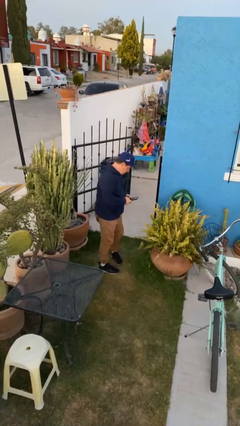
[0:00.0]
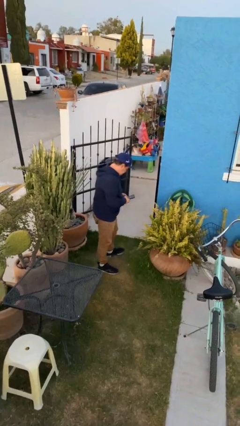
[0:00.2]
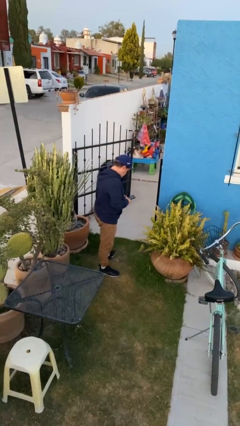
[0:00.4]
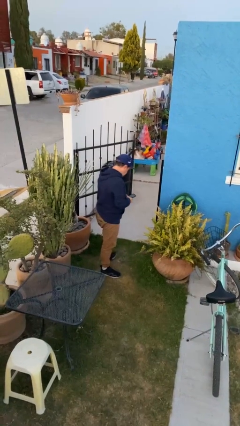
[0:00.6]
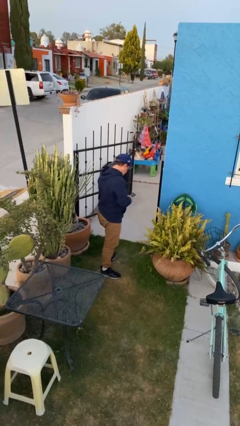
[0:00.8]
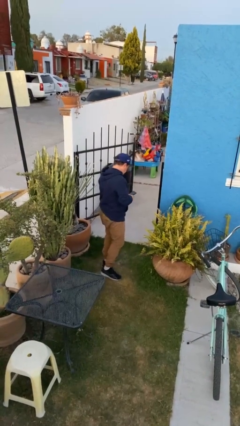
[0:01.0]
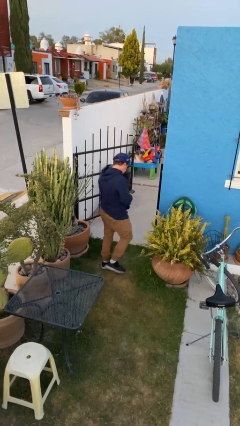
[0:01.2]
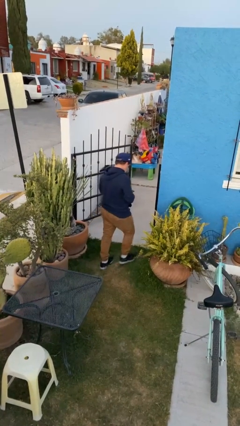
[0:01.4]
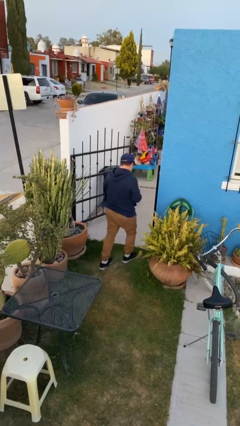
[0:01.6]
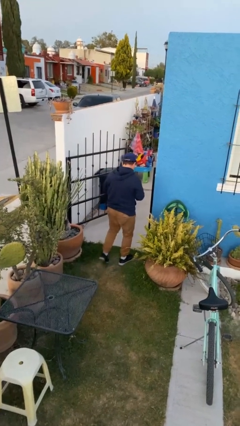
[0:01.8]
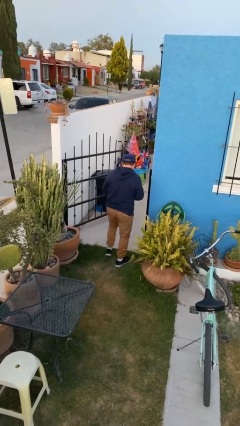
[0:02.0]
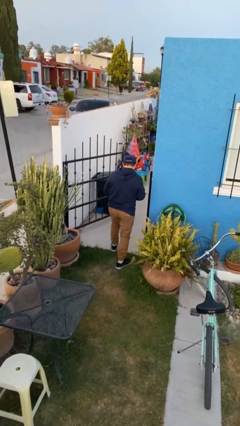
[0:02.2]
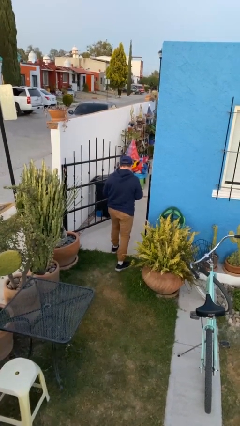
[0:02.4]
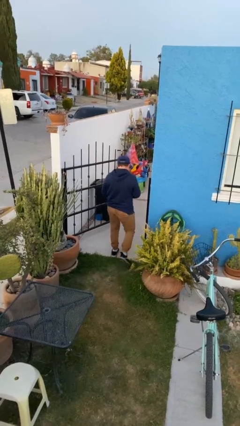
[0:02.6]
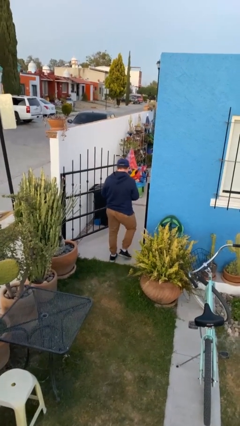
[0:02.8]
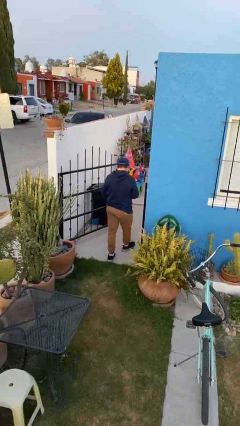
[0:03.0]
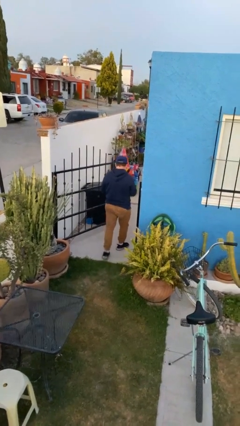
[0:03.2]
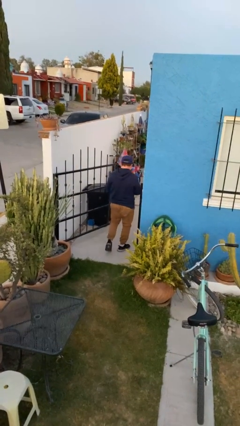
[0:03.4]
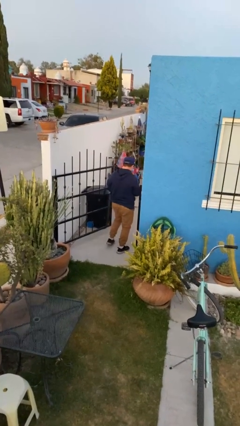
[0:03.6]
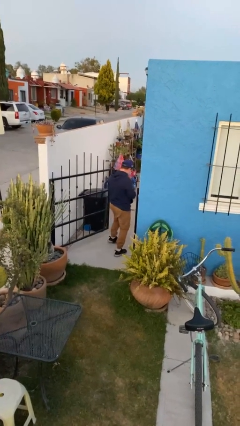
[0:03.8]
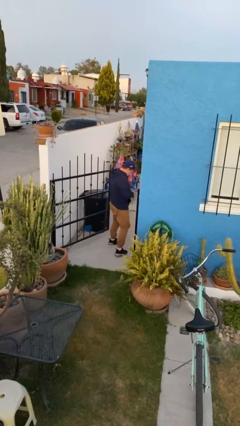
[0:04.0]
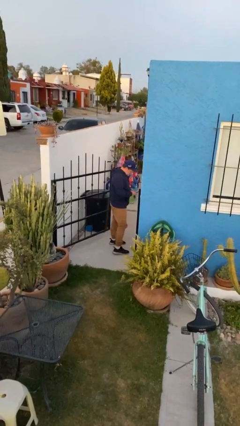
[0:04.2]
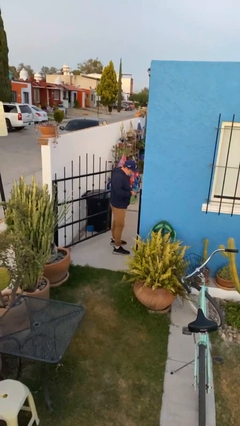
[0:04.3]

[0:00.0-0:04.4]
person exits scene through structure

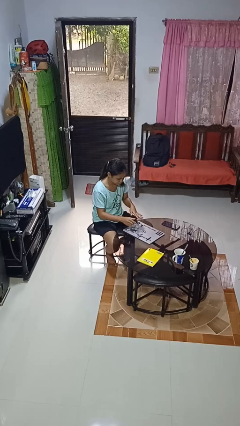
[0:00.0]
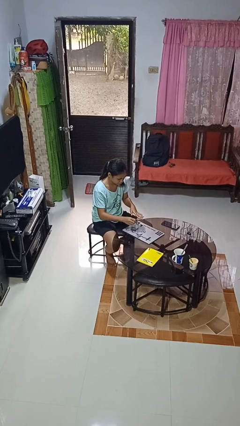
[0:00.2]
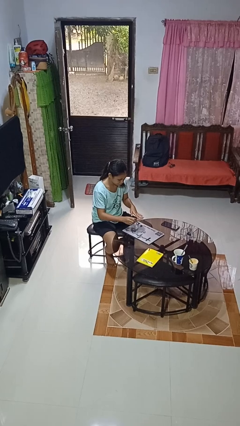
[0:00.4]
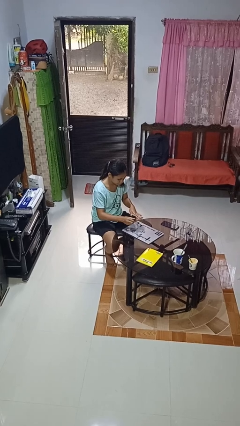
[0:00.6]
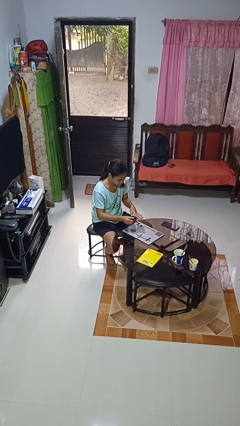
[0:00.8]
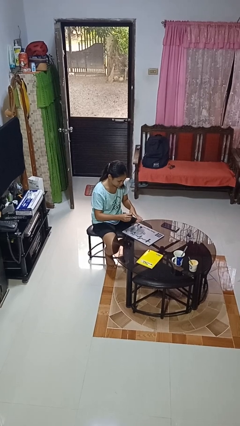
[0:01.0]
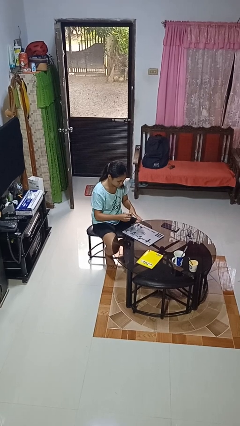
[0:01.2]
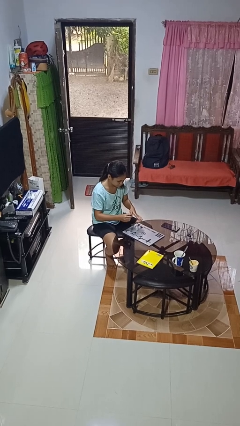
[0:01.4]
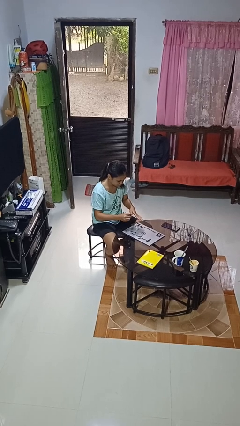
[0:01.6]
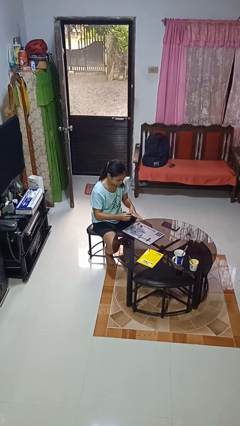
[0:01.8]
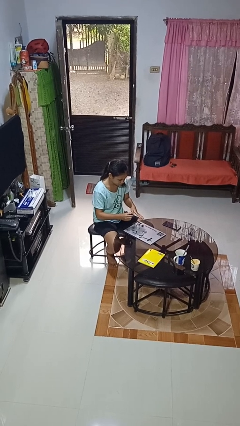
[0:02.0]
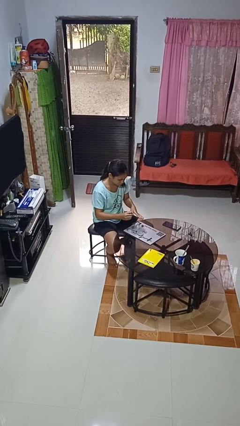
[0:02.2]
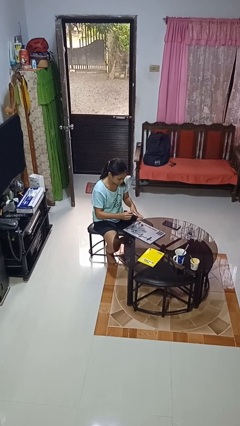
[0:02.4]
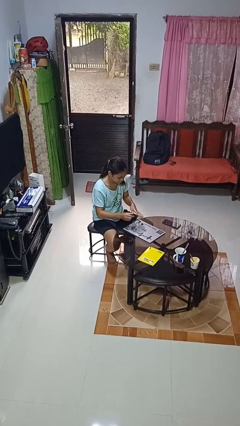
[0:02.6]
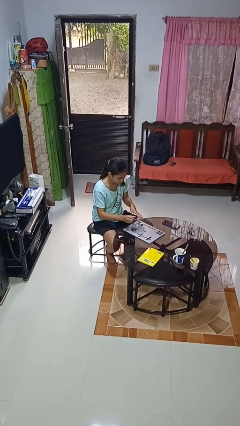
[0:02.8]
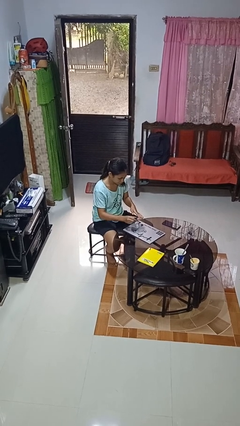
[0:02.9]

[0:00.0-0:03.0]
person paints fingernails

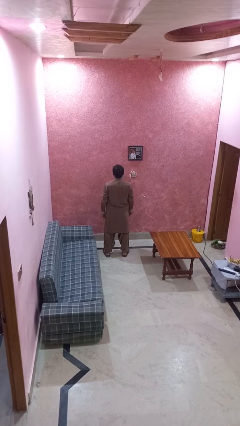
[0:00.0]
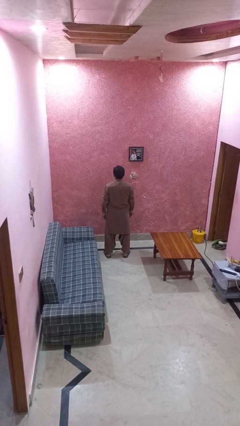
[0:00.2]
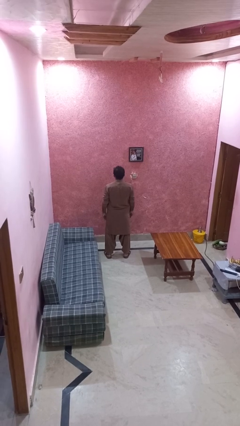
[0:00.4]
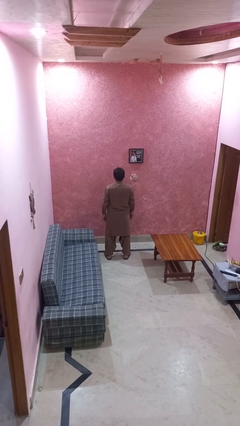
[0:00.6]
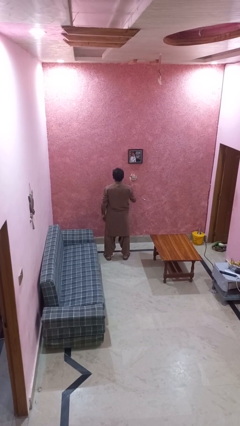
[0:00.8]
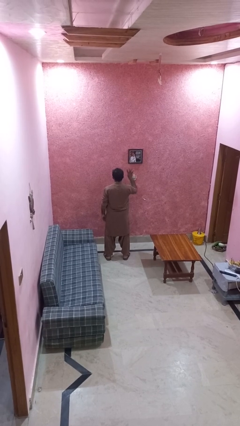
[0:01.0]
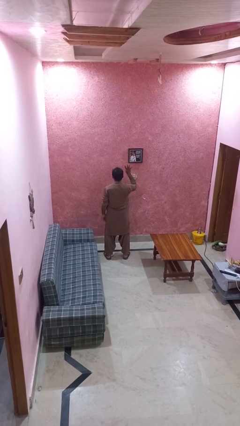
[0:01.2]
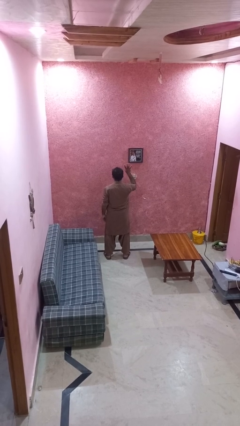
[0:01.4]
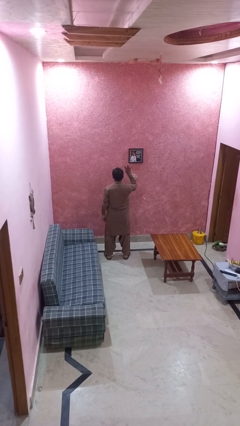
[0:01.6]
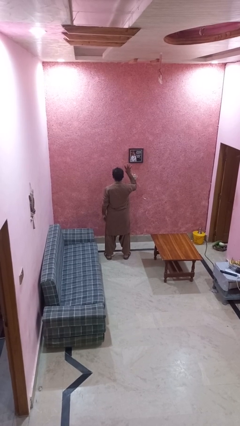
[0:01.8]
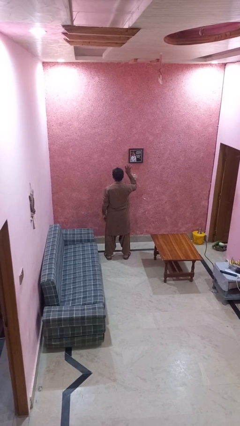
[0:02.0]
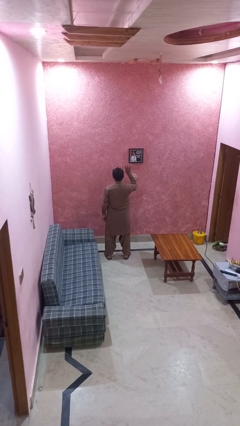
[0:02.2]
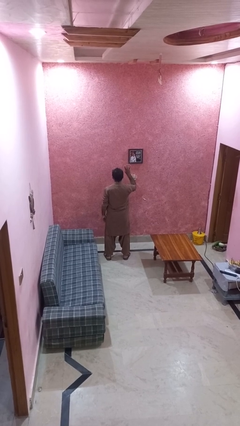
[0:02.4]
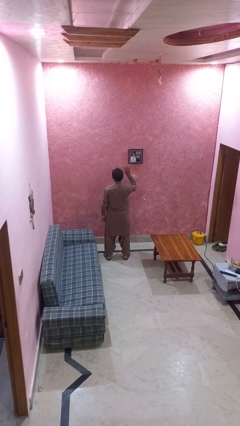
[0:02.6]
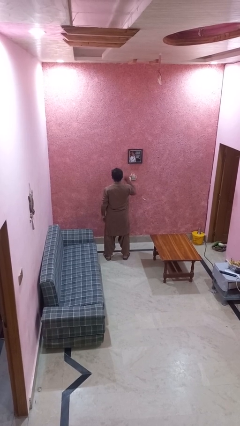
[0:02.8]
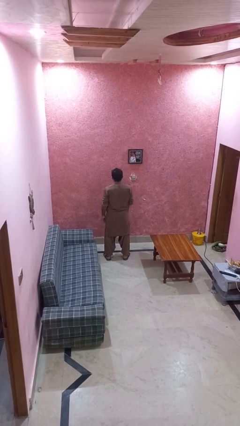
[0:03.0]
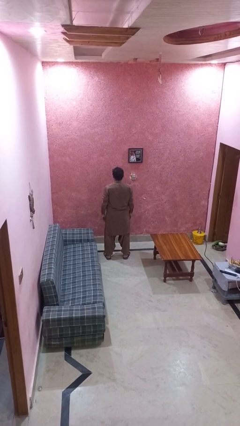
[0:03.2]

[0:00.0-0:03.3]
person gestures number four

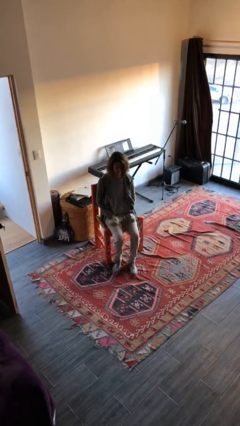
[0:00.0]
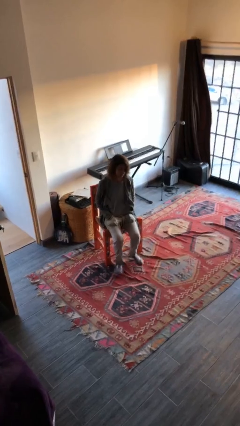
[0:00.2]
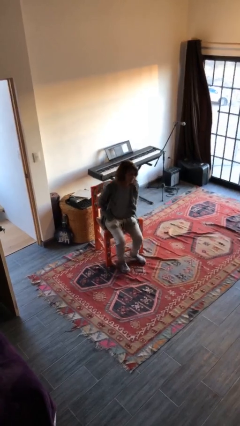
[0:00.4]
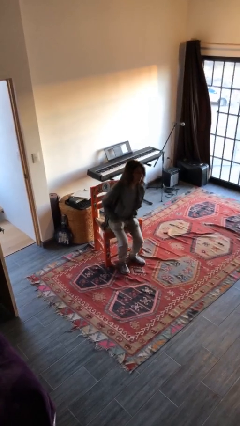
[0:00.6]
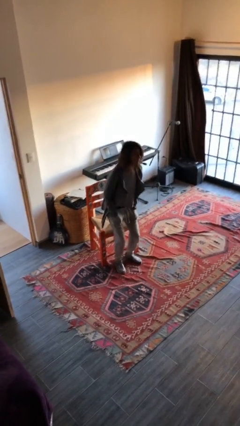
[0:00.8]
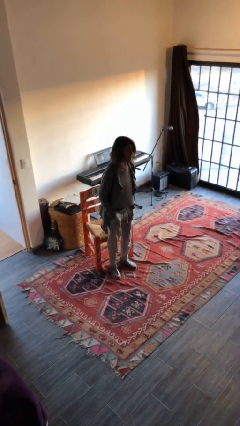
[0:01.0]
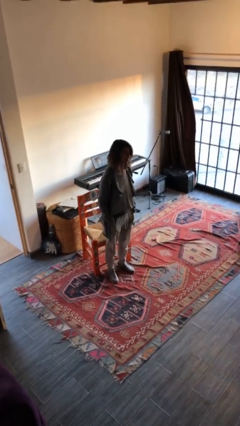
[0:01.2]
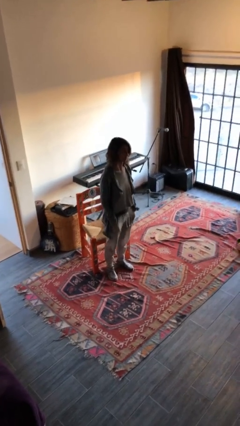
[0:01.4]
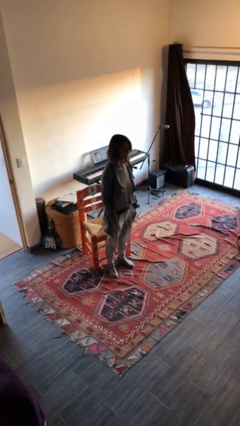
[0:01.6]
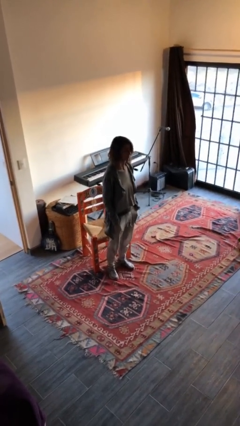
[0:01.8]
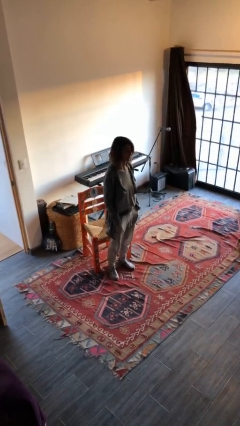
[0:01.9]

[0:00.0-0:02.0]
person stands up

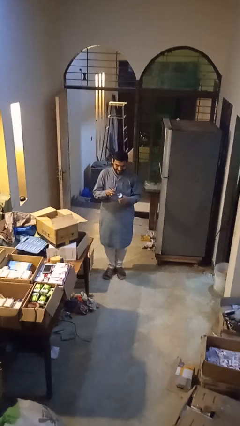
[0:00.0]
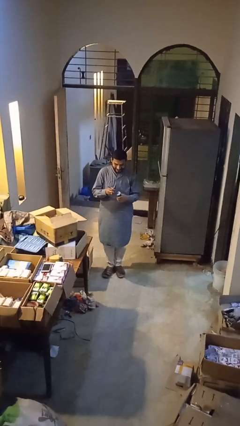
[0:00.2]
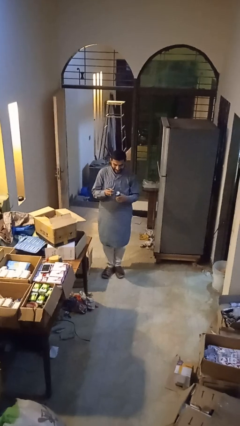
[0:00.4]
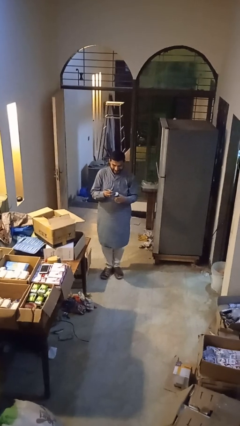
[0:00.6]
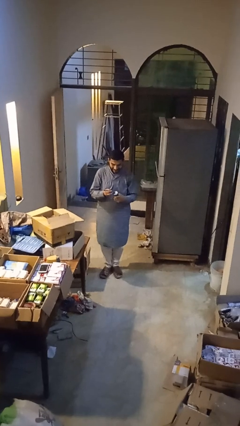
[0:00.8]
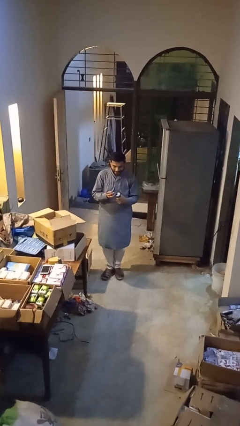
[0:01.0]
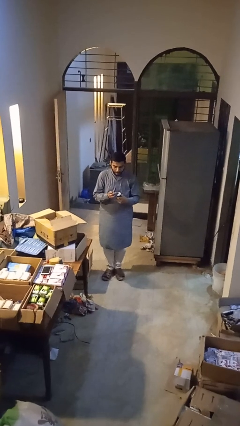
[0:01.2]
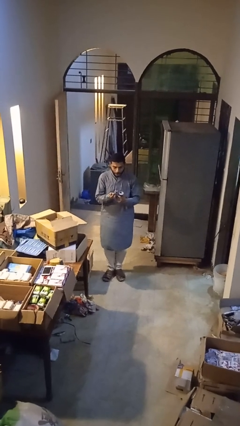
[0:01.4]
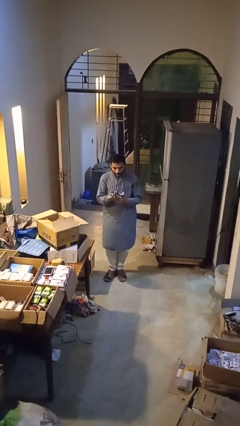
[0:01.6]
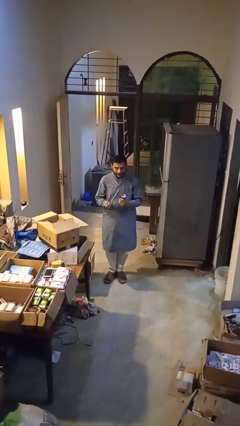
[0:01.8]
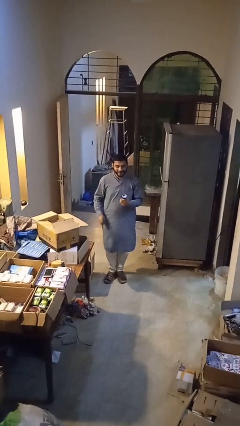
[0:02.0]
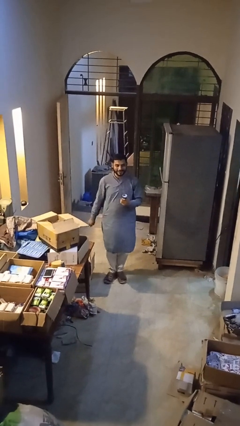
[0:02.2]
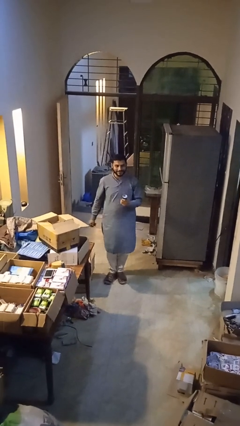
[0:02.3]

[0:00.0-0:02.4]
person opens can with can opener

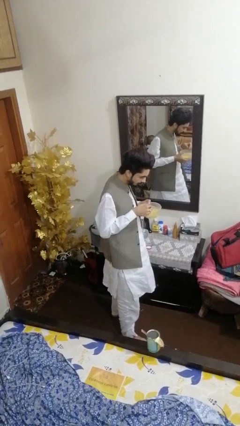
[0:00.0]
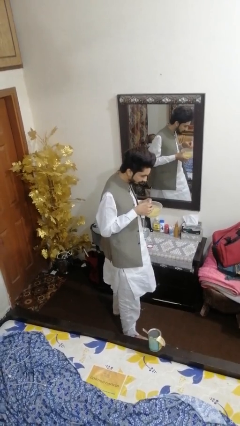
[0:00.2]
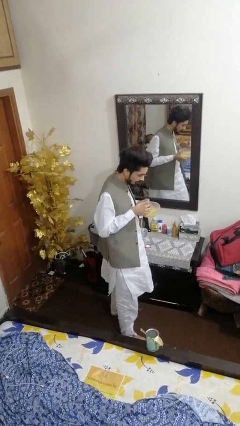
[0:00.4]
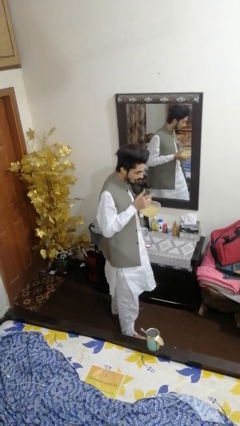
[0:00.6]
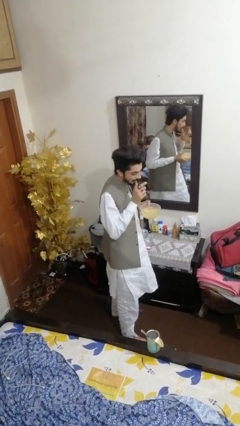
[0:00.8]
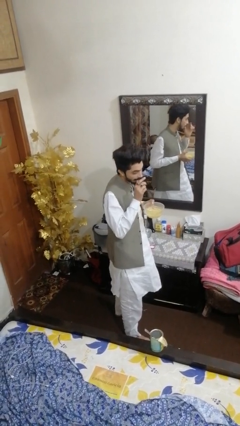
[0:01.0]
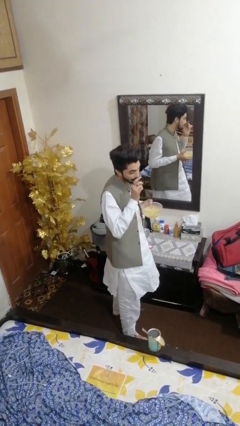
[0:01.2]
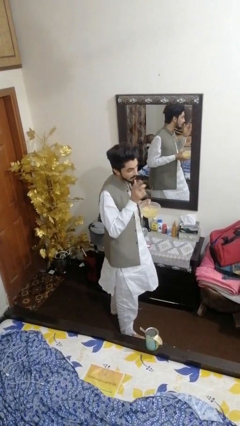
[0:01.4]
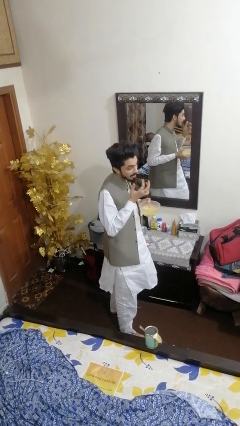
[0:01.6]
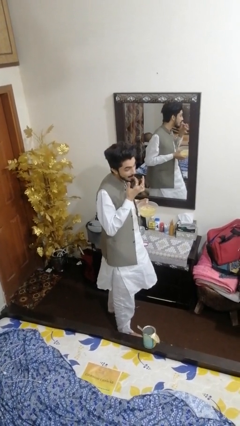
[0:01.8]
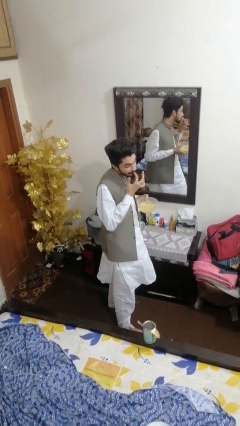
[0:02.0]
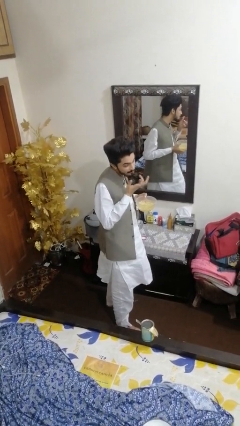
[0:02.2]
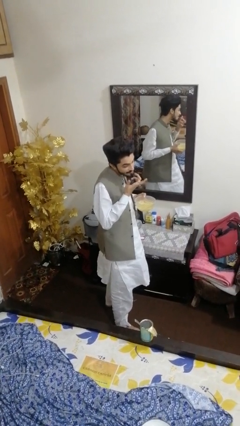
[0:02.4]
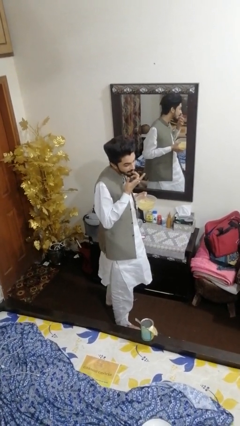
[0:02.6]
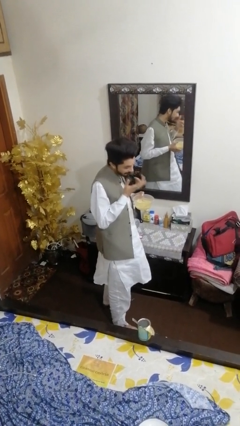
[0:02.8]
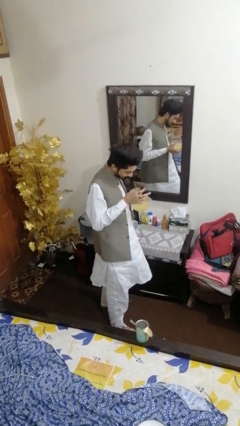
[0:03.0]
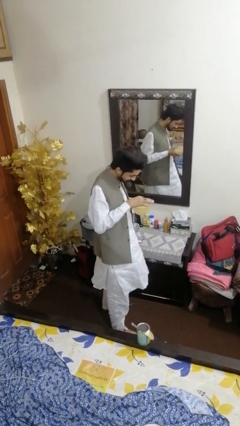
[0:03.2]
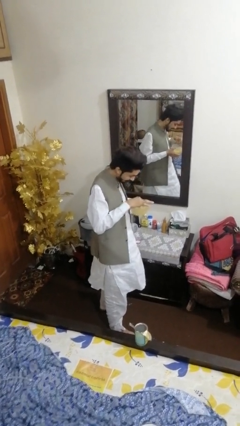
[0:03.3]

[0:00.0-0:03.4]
person licks fingers
